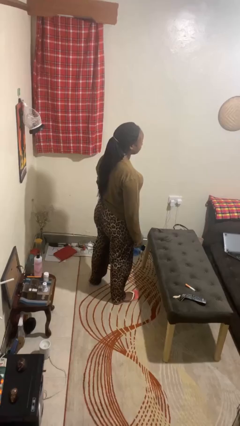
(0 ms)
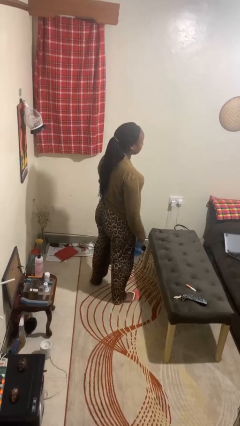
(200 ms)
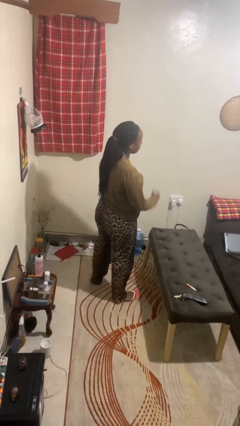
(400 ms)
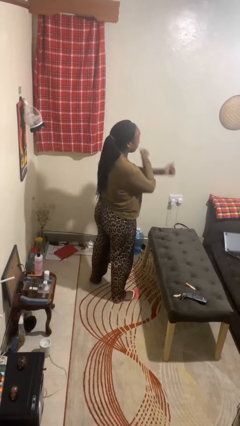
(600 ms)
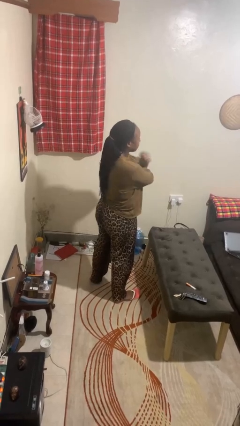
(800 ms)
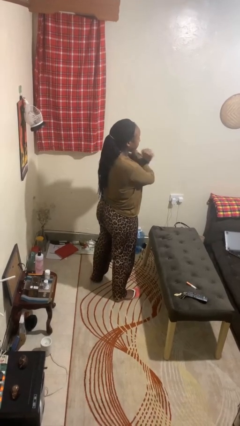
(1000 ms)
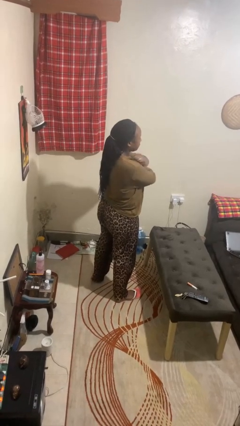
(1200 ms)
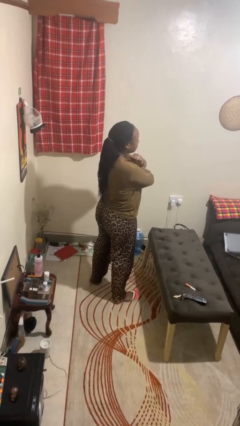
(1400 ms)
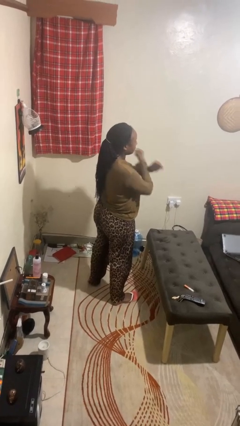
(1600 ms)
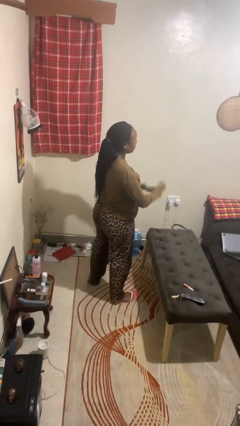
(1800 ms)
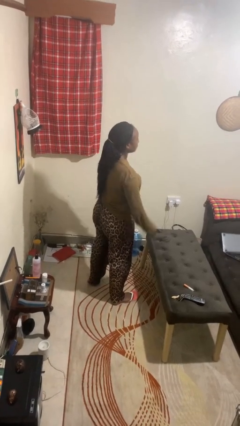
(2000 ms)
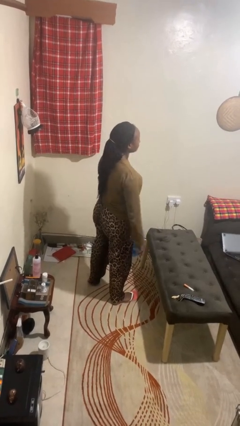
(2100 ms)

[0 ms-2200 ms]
person gestures arms x

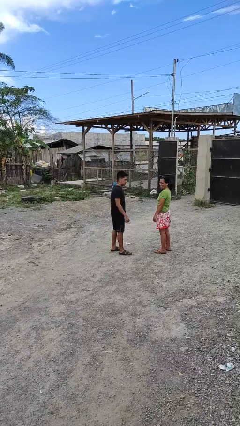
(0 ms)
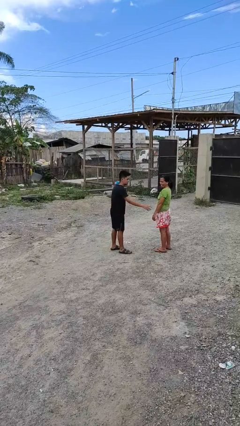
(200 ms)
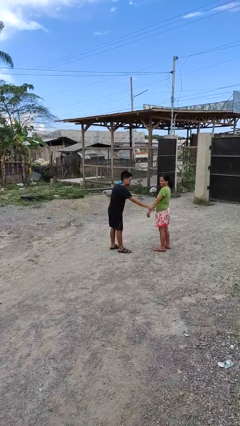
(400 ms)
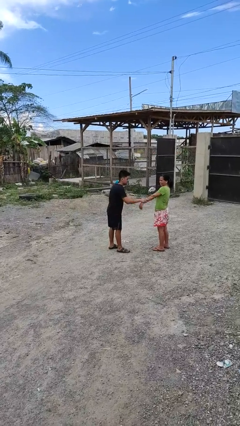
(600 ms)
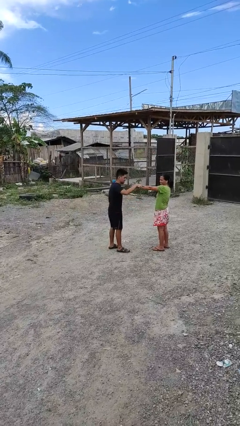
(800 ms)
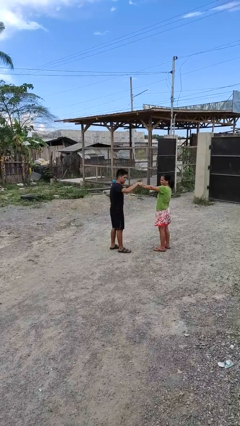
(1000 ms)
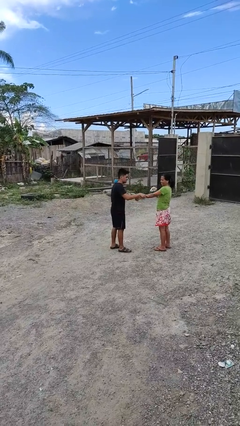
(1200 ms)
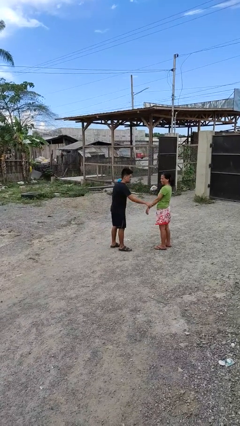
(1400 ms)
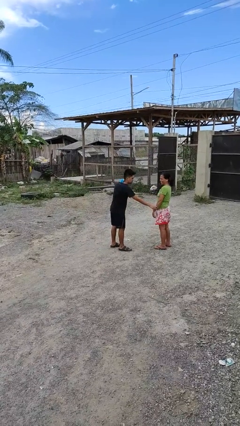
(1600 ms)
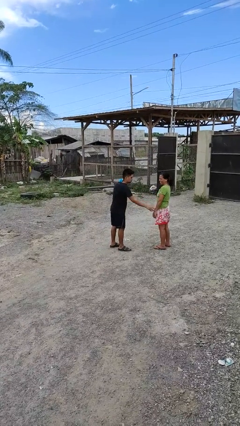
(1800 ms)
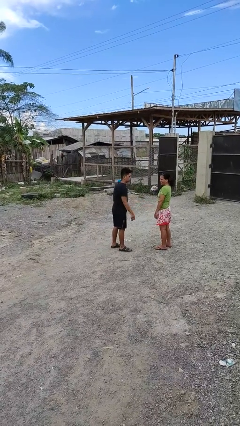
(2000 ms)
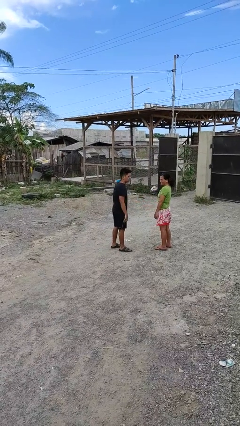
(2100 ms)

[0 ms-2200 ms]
person grabs person by forearm

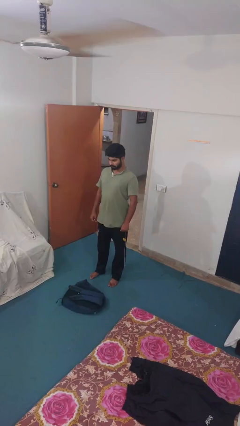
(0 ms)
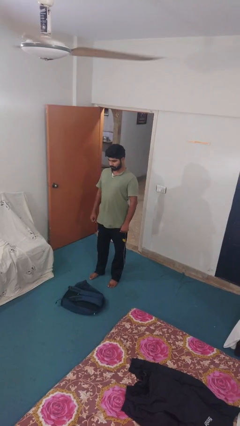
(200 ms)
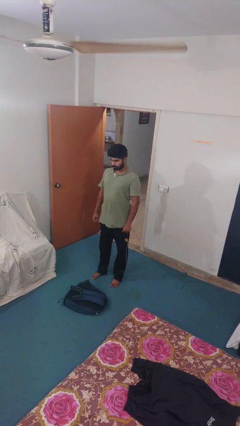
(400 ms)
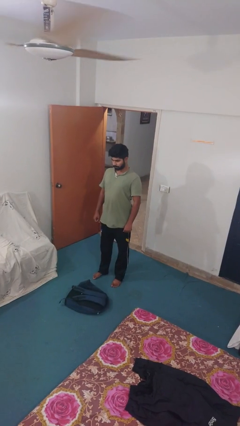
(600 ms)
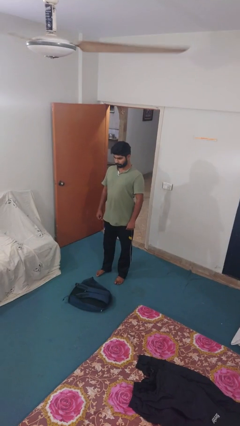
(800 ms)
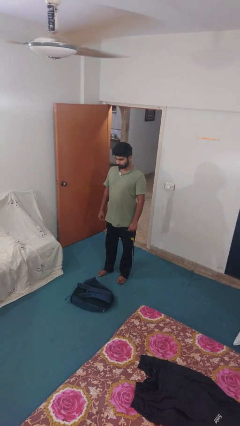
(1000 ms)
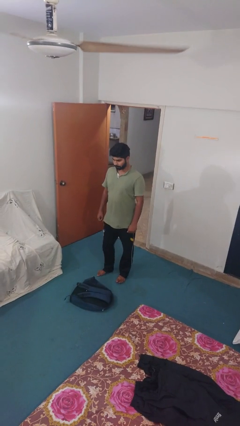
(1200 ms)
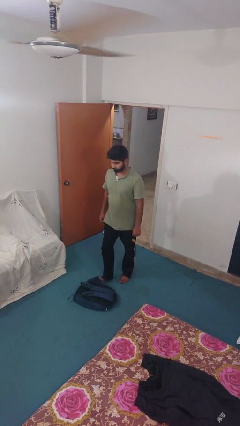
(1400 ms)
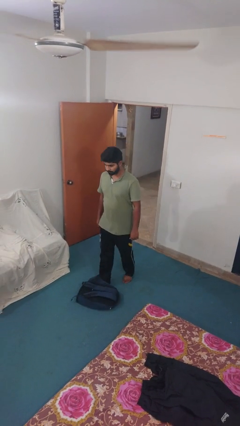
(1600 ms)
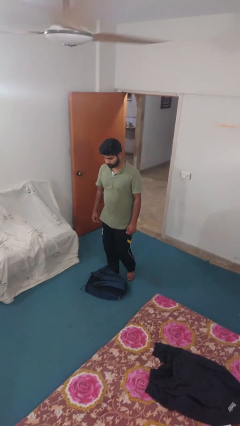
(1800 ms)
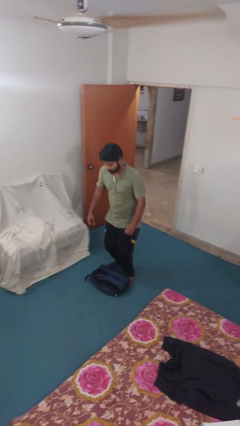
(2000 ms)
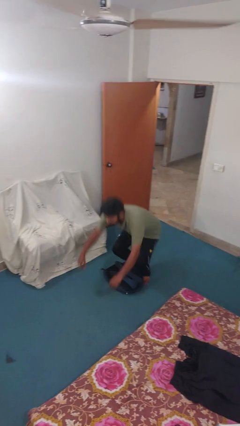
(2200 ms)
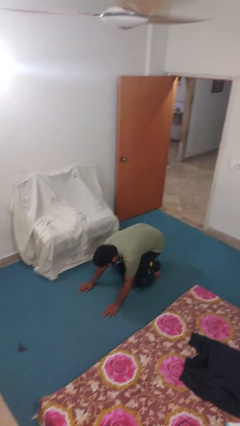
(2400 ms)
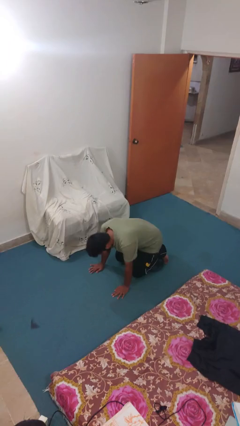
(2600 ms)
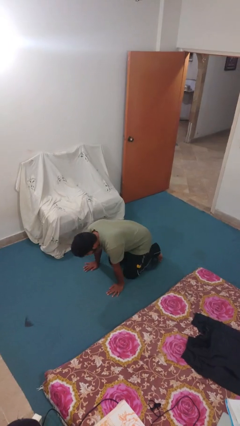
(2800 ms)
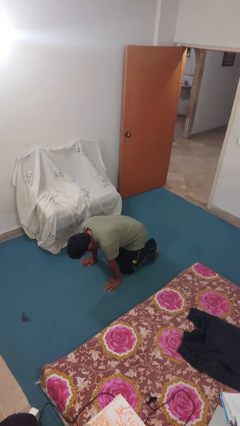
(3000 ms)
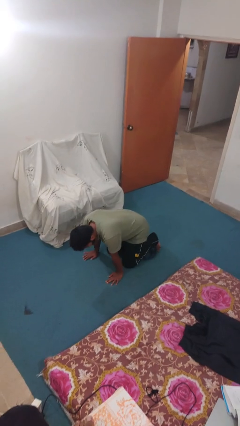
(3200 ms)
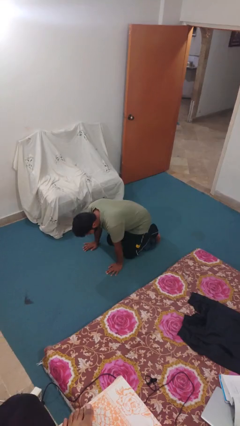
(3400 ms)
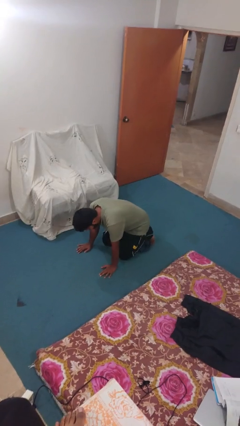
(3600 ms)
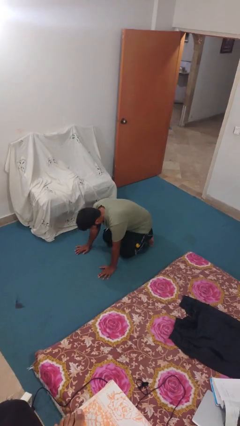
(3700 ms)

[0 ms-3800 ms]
person trips on object on floor

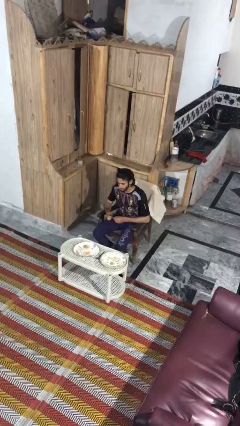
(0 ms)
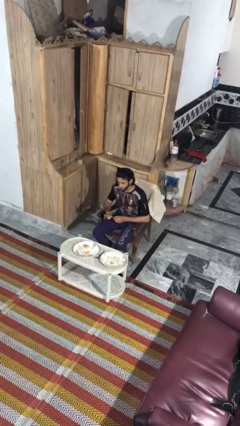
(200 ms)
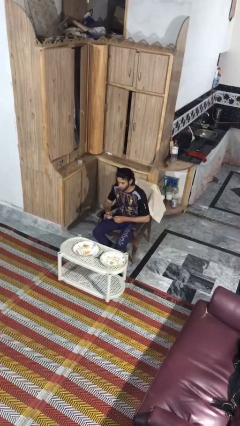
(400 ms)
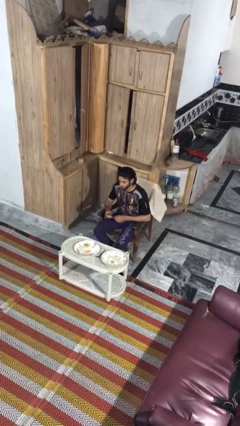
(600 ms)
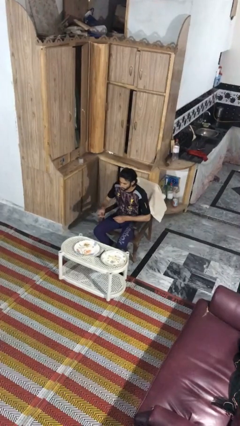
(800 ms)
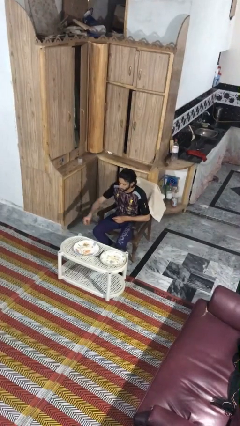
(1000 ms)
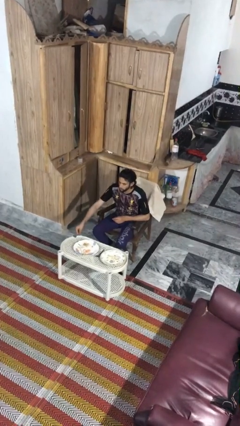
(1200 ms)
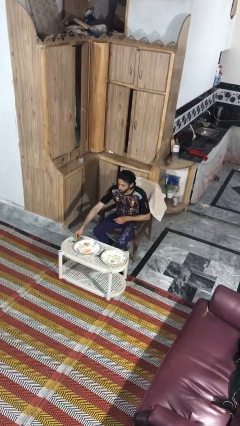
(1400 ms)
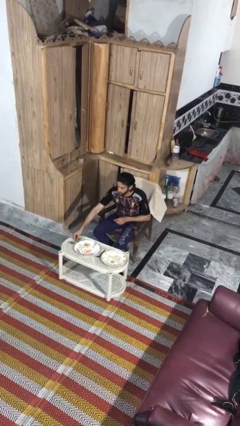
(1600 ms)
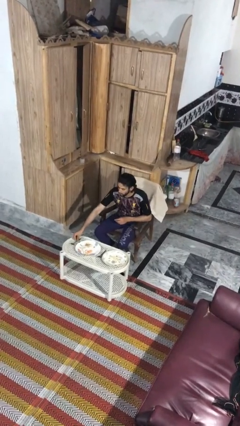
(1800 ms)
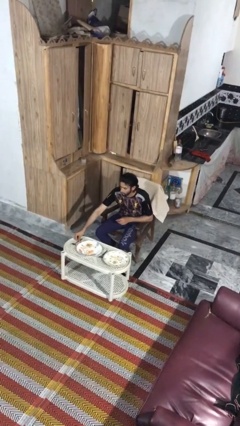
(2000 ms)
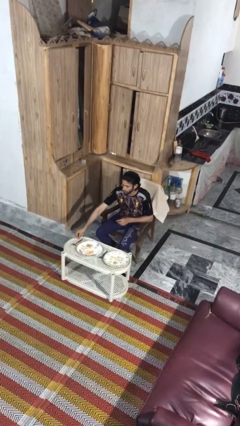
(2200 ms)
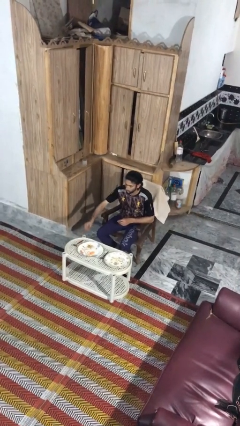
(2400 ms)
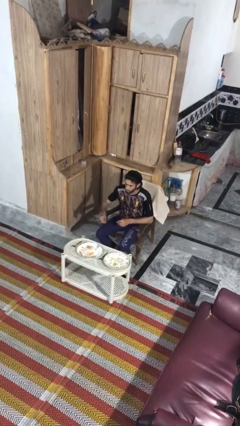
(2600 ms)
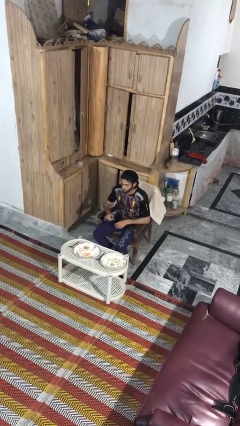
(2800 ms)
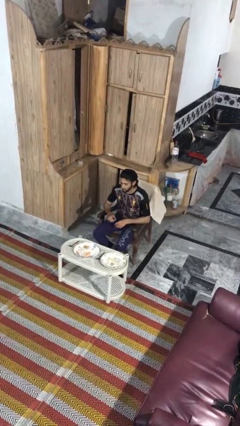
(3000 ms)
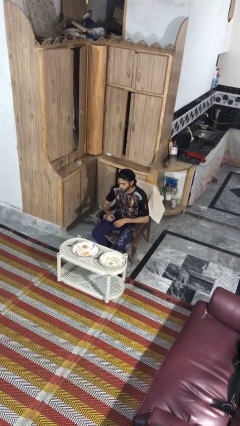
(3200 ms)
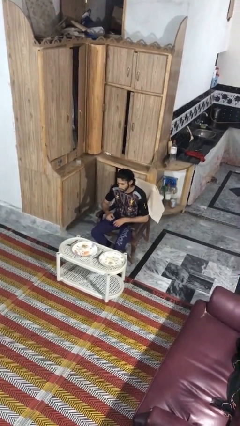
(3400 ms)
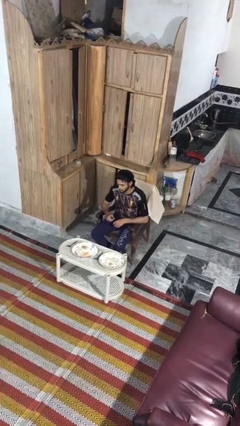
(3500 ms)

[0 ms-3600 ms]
person sets table

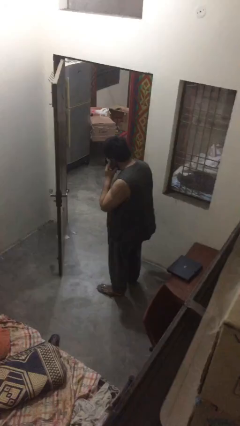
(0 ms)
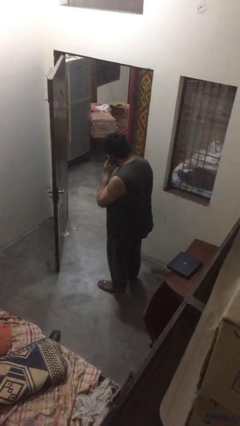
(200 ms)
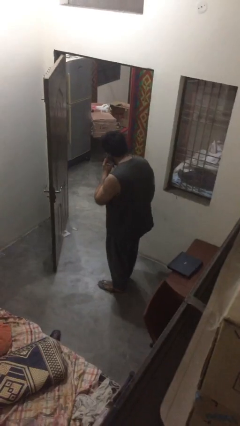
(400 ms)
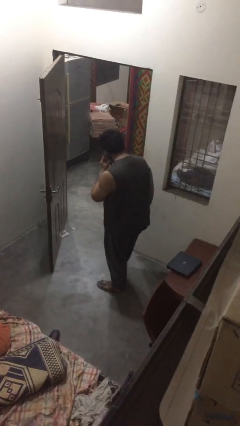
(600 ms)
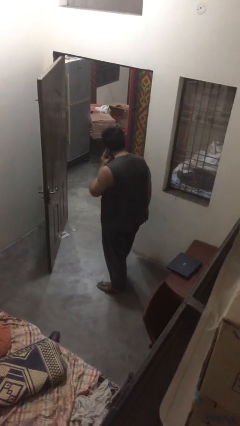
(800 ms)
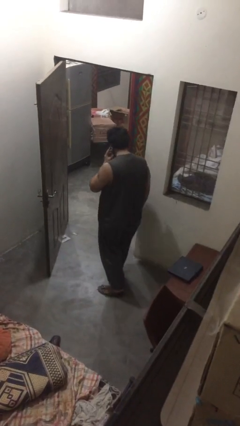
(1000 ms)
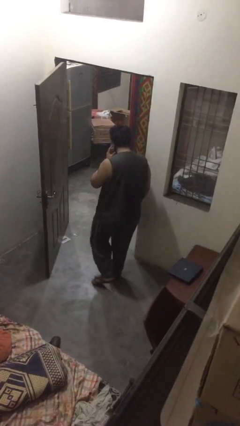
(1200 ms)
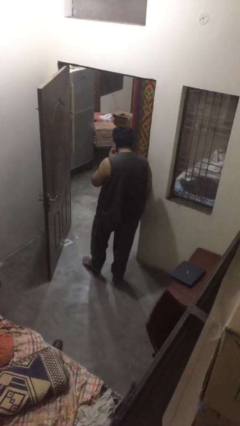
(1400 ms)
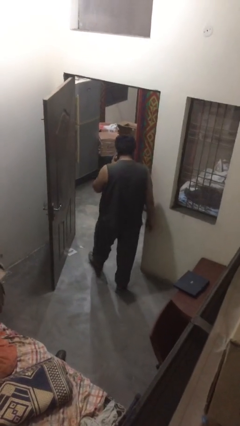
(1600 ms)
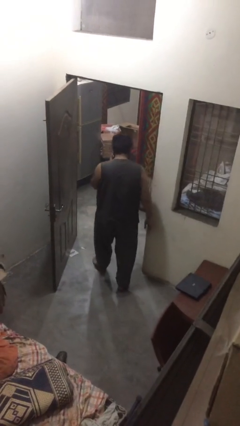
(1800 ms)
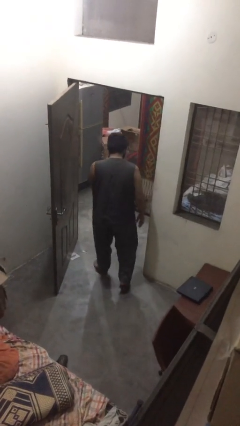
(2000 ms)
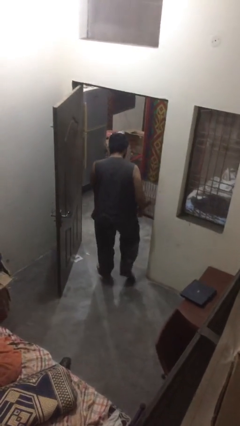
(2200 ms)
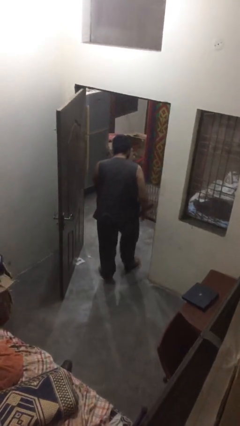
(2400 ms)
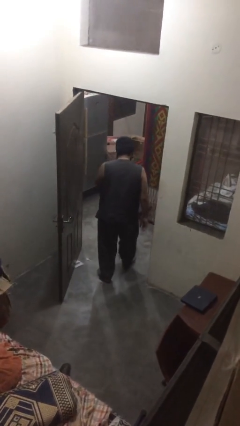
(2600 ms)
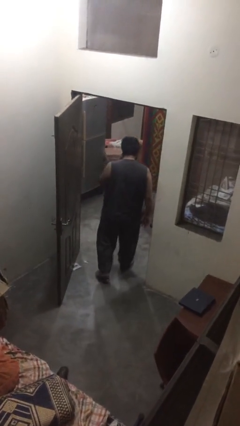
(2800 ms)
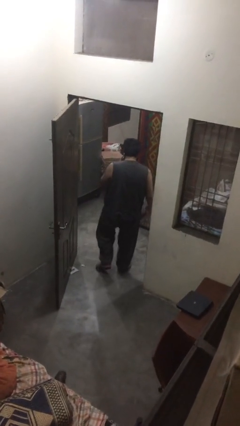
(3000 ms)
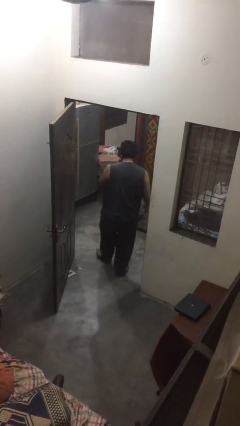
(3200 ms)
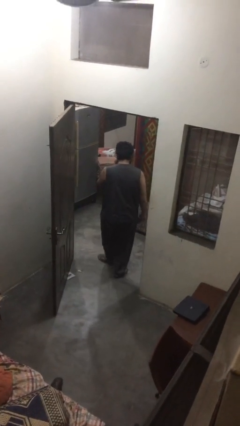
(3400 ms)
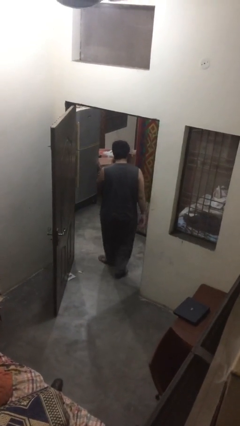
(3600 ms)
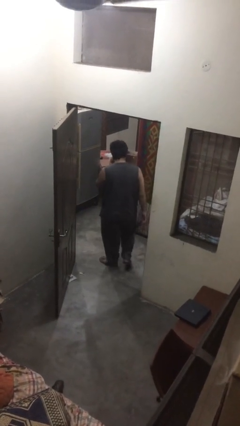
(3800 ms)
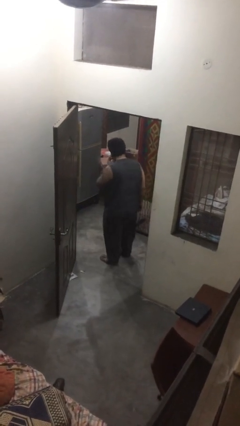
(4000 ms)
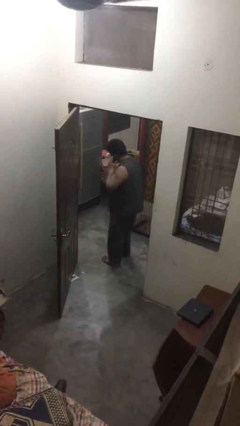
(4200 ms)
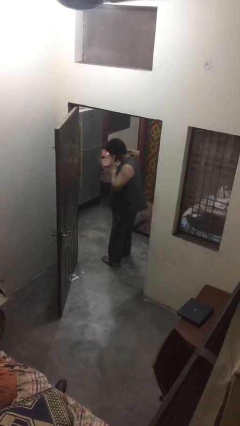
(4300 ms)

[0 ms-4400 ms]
person exits scene through structure

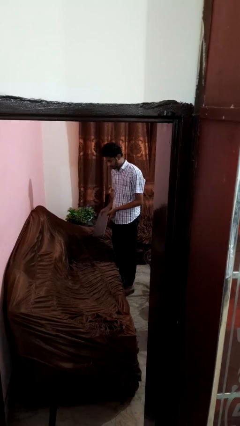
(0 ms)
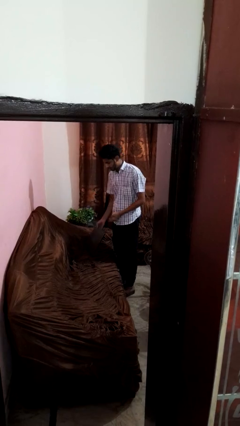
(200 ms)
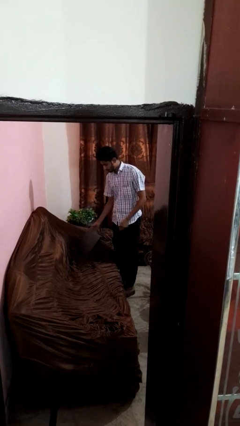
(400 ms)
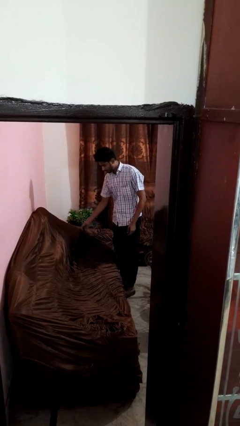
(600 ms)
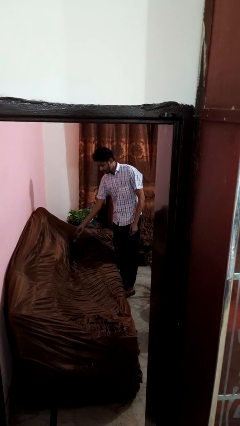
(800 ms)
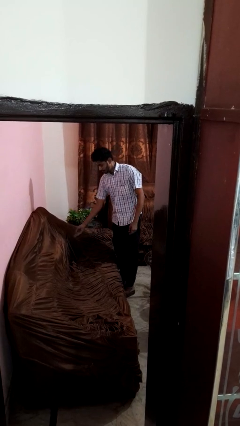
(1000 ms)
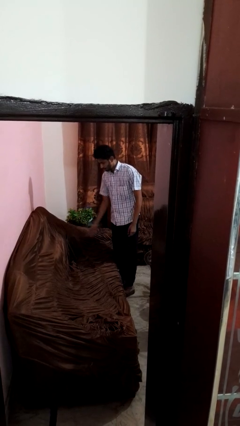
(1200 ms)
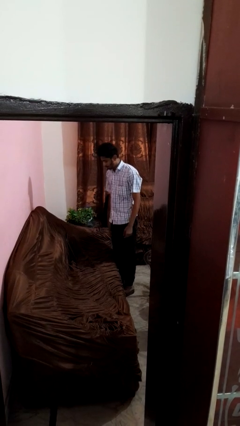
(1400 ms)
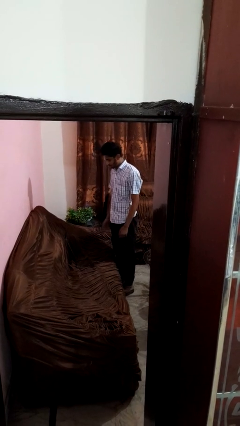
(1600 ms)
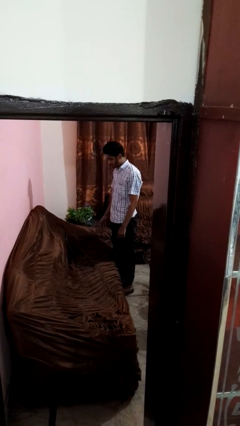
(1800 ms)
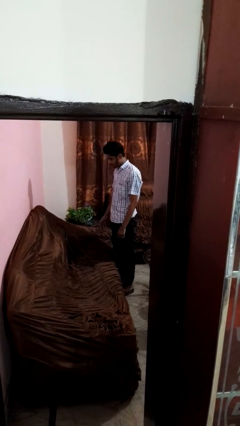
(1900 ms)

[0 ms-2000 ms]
person puts down object on couch
